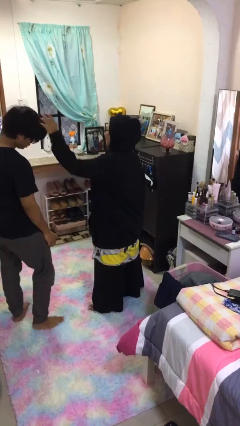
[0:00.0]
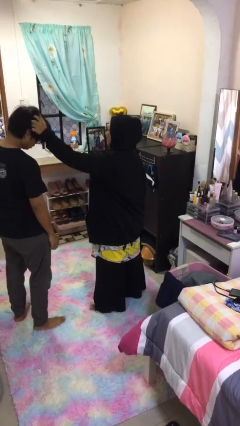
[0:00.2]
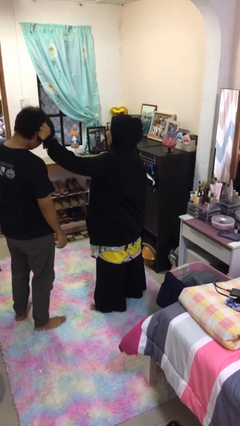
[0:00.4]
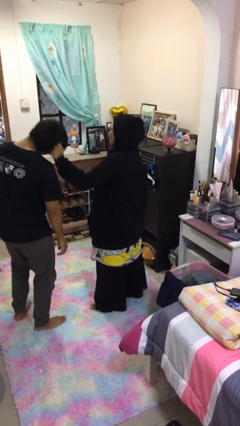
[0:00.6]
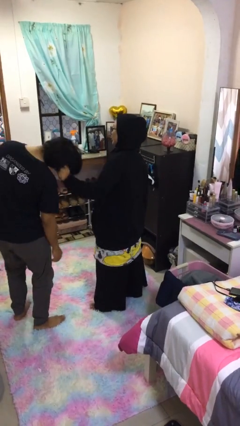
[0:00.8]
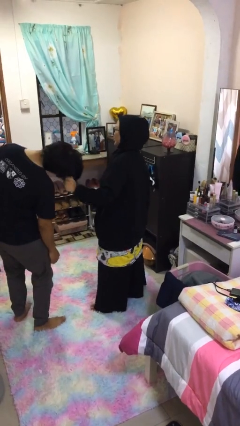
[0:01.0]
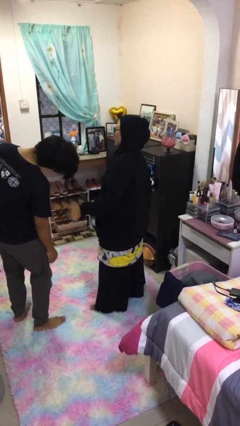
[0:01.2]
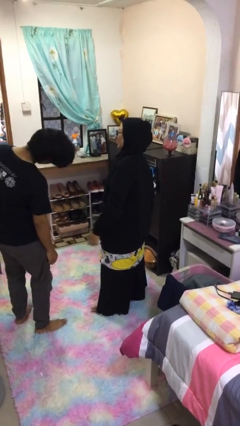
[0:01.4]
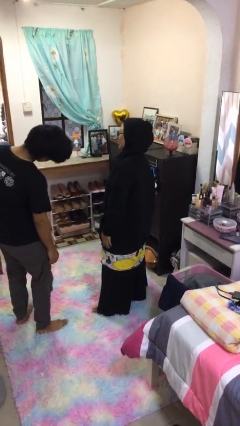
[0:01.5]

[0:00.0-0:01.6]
person grabs person by hair

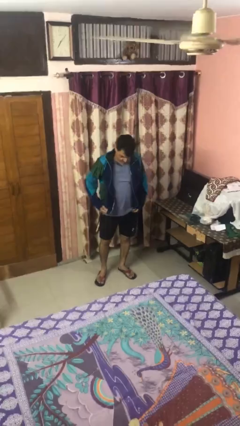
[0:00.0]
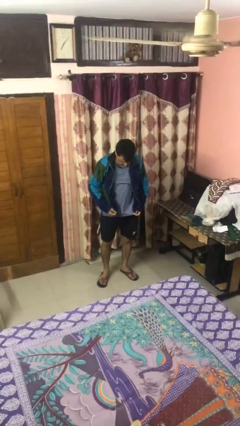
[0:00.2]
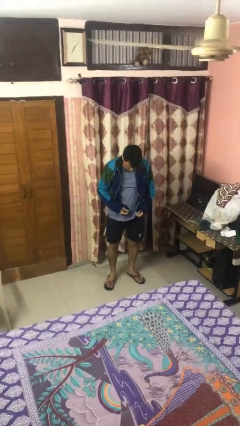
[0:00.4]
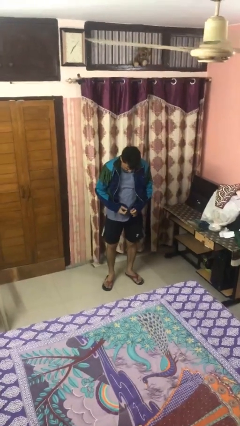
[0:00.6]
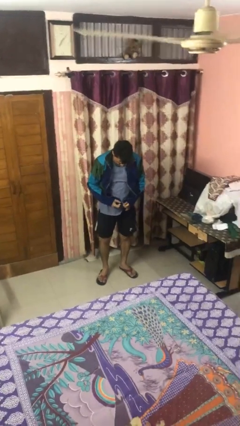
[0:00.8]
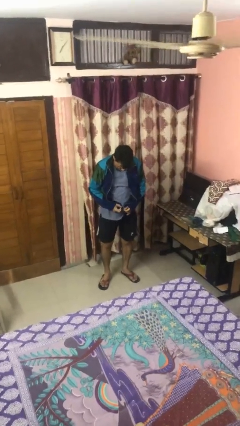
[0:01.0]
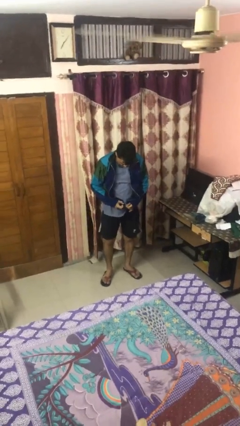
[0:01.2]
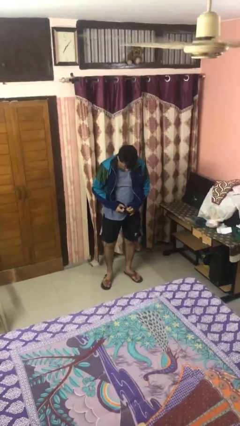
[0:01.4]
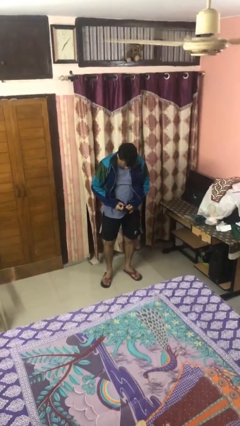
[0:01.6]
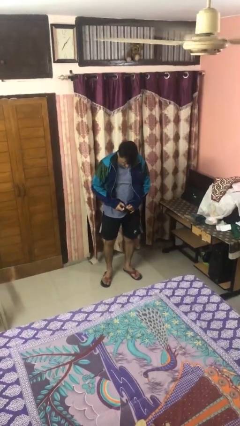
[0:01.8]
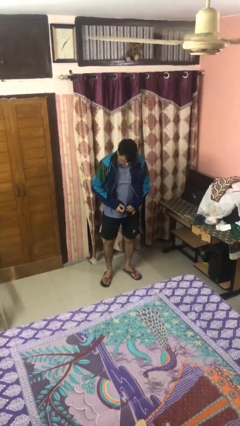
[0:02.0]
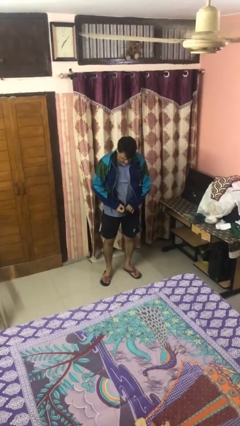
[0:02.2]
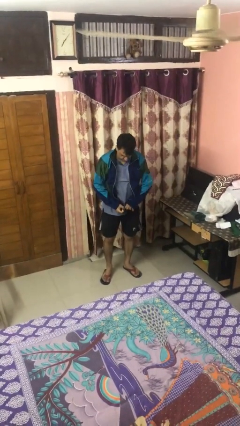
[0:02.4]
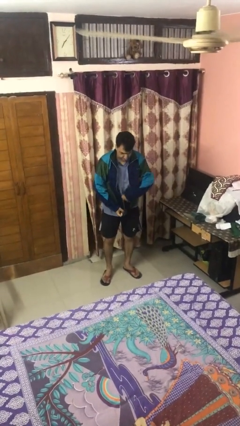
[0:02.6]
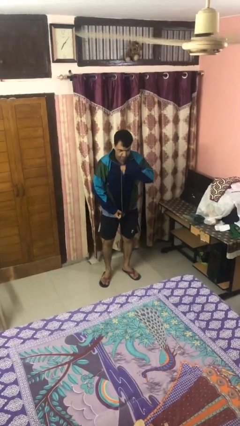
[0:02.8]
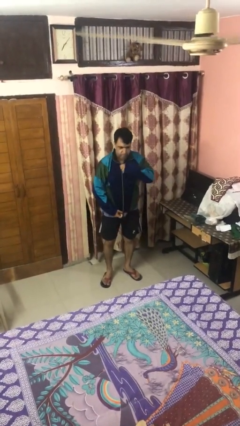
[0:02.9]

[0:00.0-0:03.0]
person zips up jacket

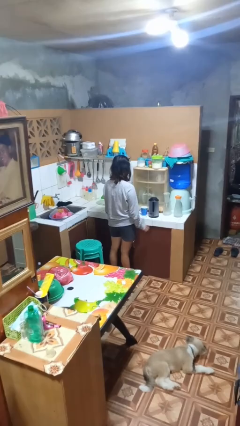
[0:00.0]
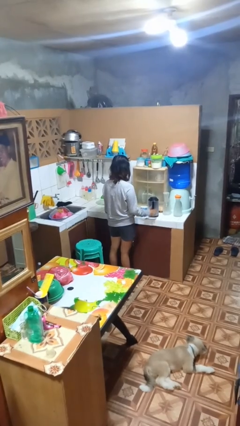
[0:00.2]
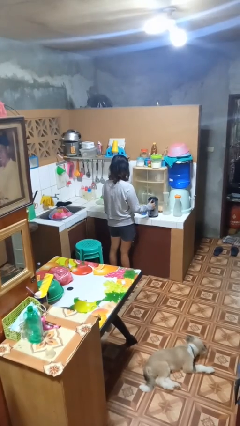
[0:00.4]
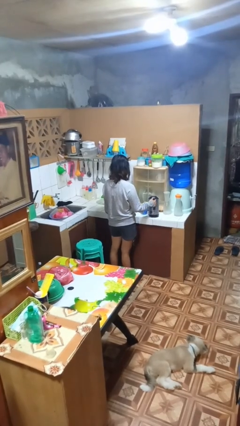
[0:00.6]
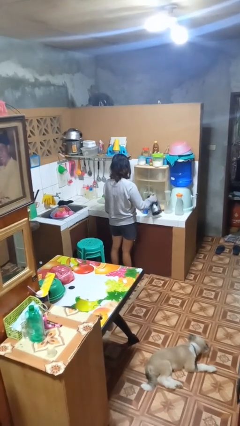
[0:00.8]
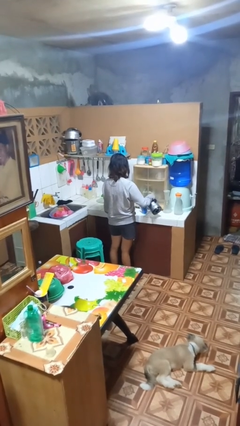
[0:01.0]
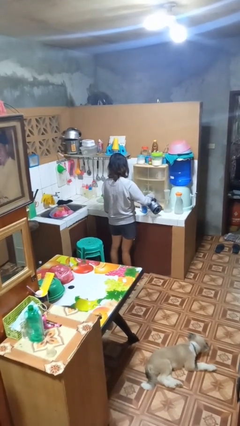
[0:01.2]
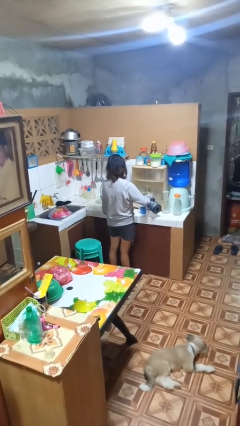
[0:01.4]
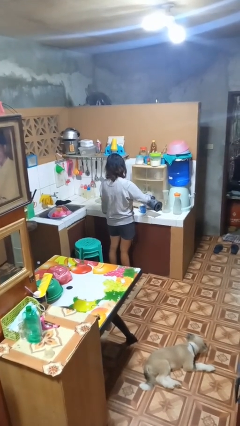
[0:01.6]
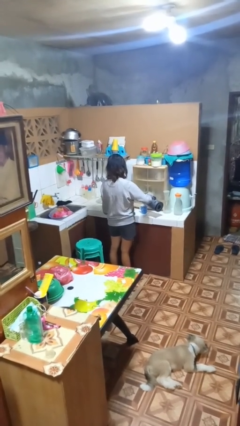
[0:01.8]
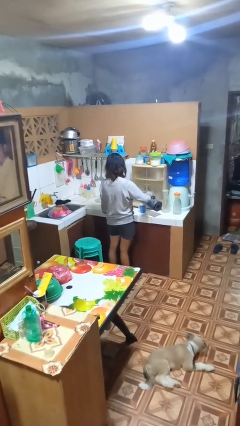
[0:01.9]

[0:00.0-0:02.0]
person pours coffee into mug

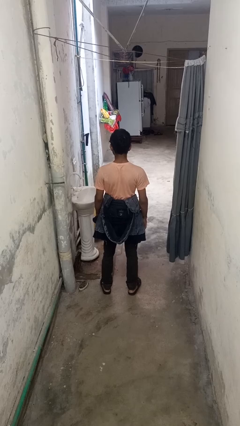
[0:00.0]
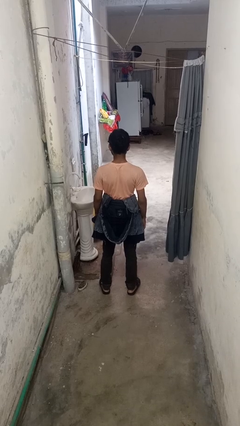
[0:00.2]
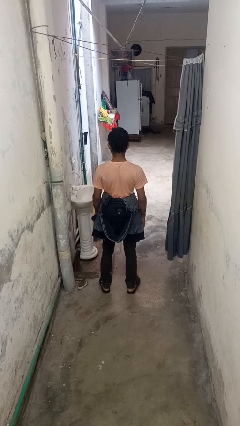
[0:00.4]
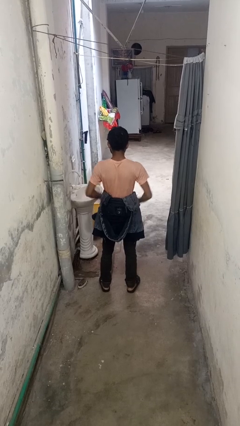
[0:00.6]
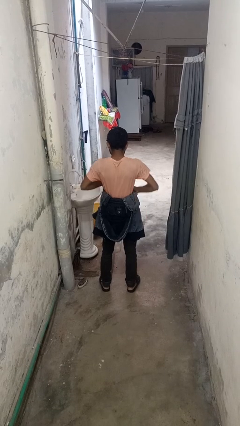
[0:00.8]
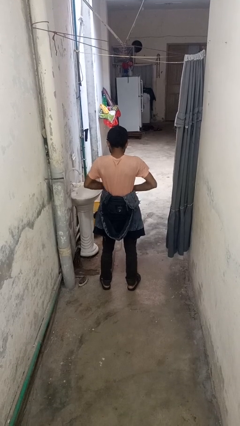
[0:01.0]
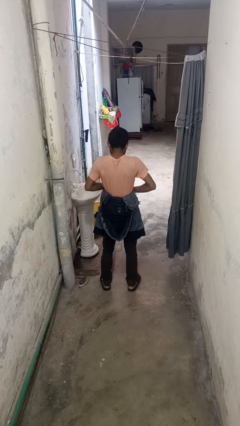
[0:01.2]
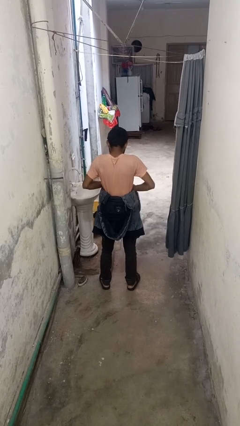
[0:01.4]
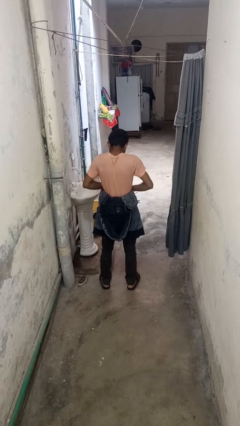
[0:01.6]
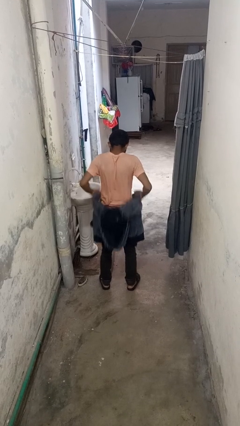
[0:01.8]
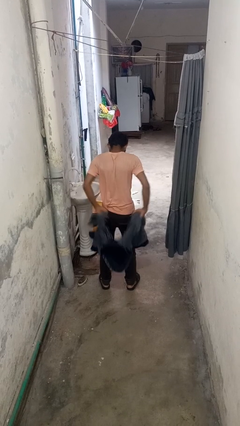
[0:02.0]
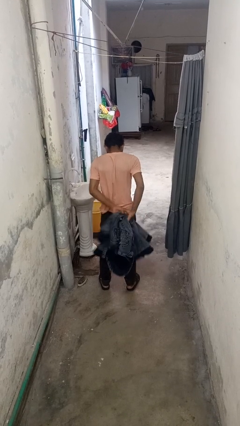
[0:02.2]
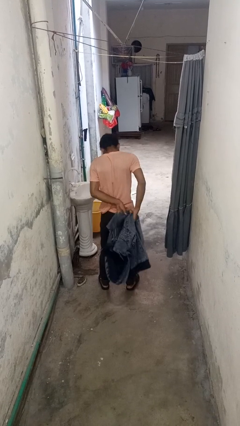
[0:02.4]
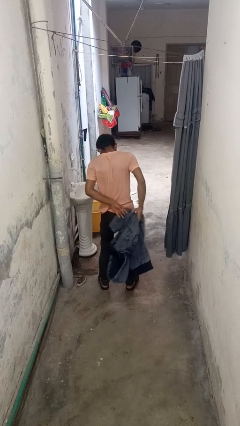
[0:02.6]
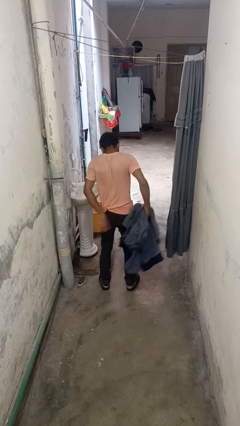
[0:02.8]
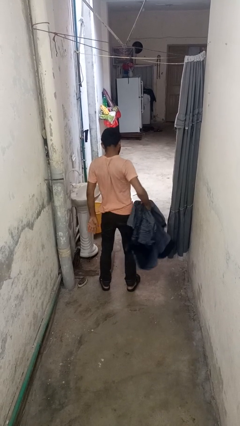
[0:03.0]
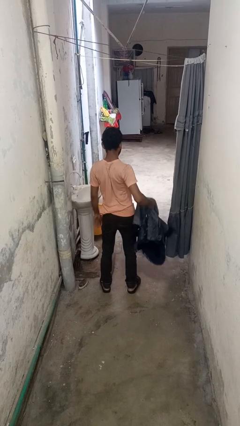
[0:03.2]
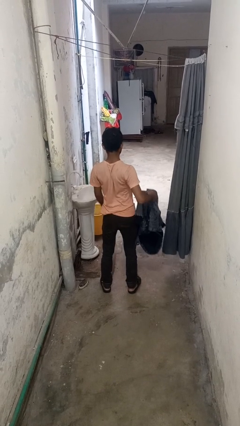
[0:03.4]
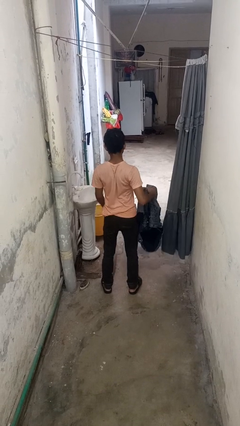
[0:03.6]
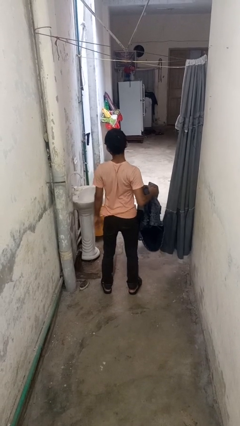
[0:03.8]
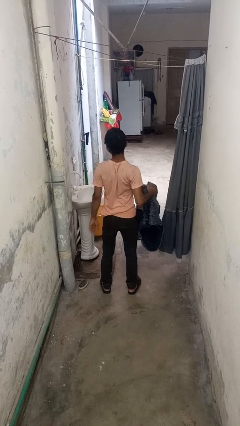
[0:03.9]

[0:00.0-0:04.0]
person unties jacket around waist

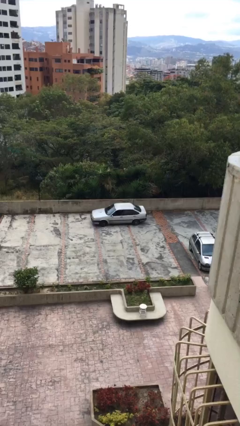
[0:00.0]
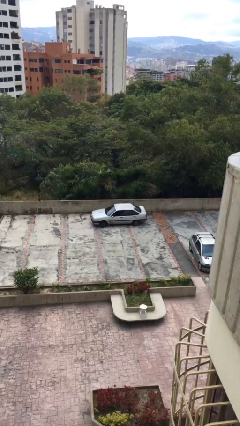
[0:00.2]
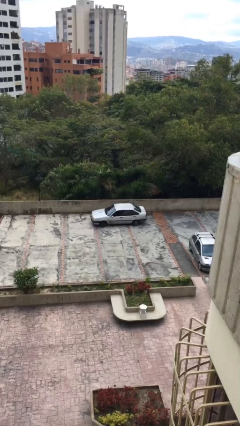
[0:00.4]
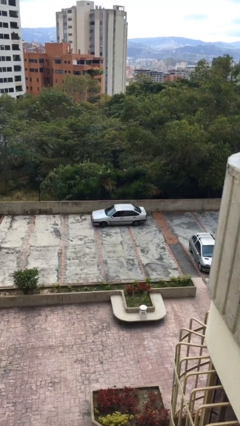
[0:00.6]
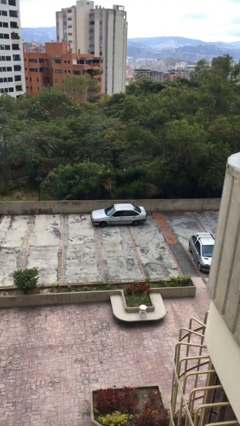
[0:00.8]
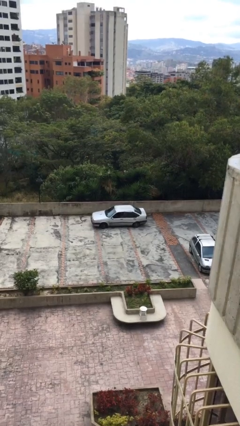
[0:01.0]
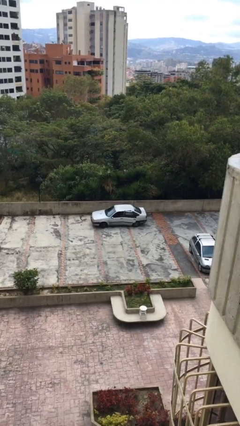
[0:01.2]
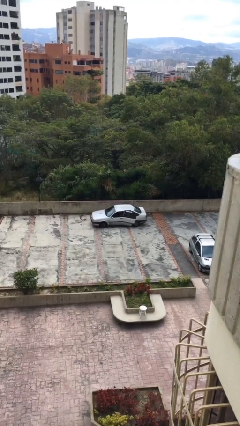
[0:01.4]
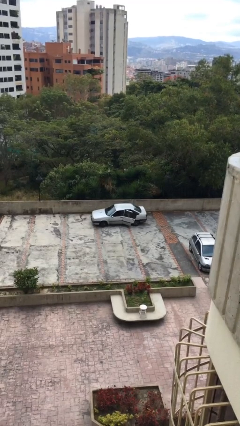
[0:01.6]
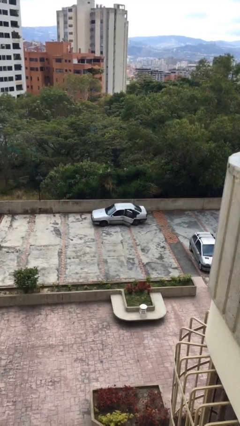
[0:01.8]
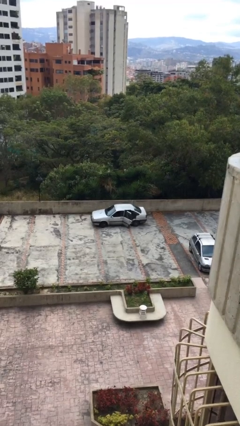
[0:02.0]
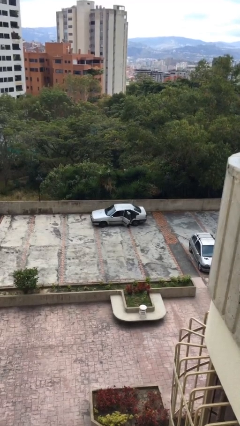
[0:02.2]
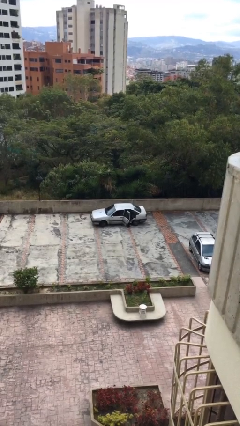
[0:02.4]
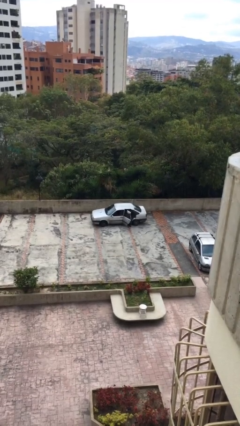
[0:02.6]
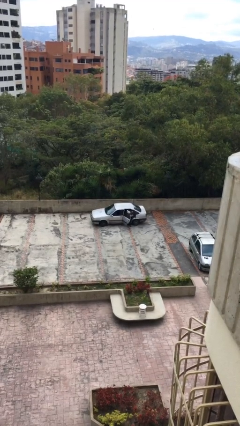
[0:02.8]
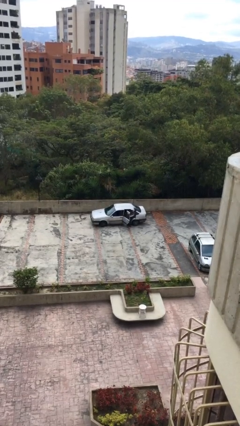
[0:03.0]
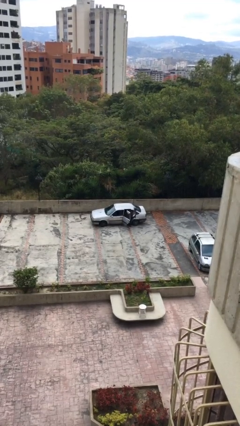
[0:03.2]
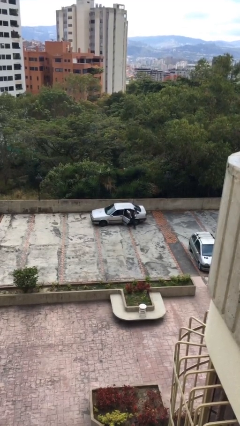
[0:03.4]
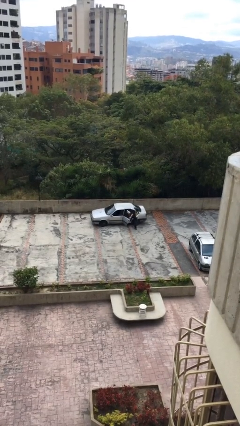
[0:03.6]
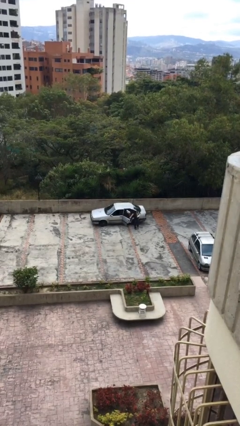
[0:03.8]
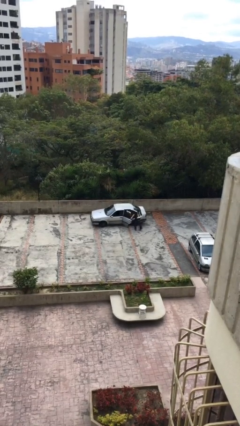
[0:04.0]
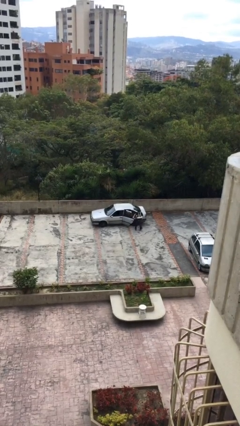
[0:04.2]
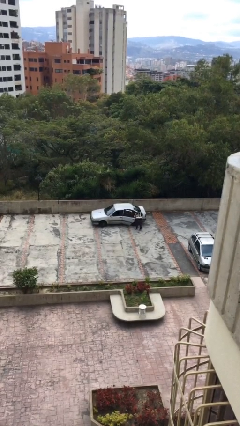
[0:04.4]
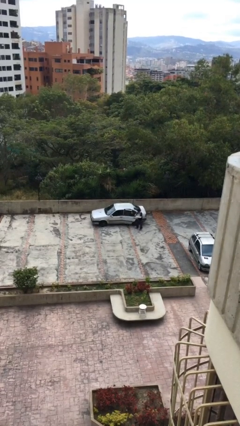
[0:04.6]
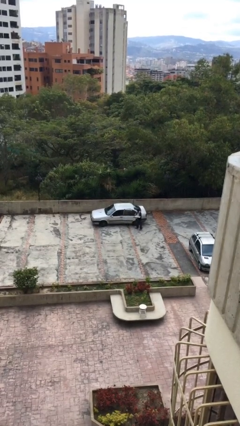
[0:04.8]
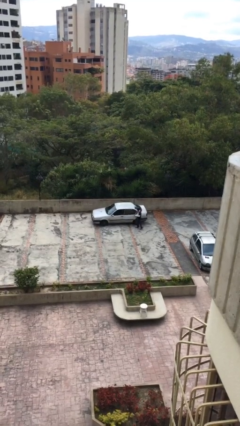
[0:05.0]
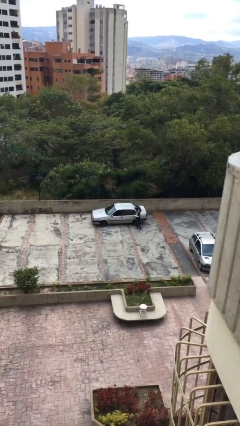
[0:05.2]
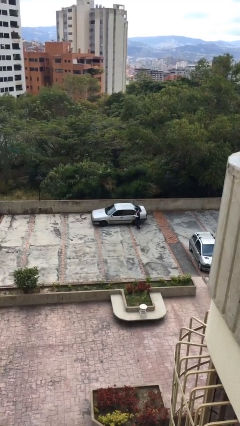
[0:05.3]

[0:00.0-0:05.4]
car drops off person

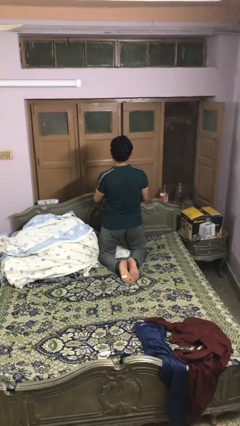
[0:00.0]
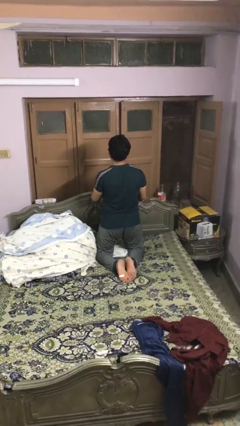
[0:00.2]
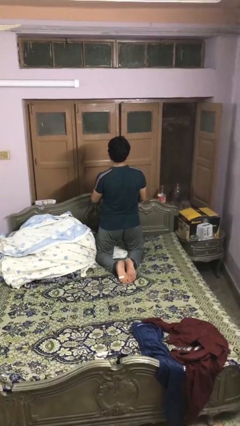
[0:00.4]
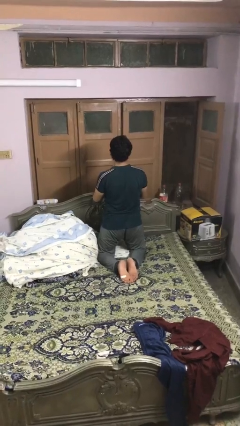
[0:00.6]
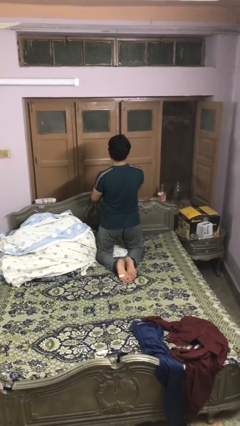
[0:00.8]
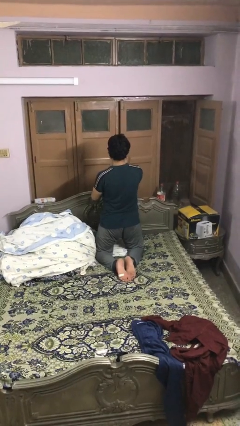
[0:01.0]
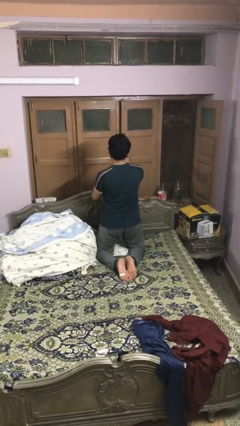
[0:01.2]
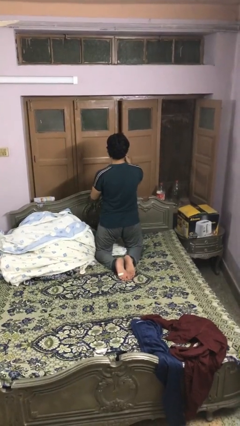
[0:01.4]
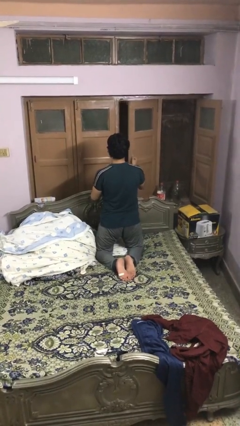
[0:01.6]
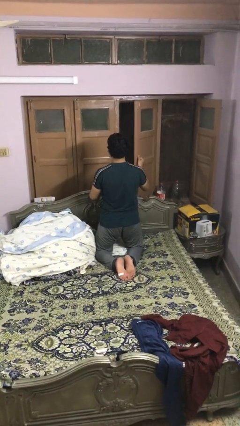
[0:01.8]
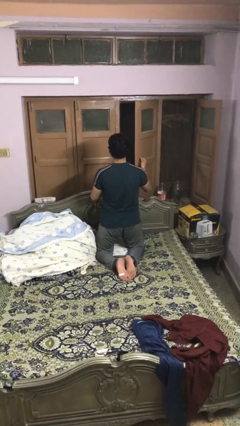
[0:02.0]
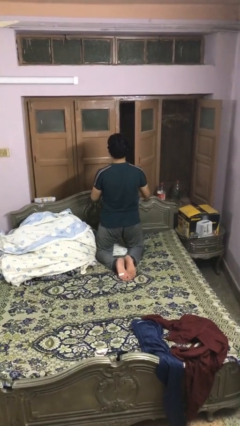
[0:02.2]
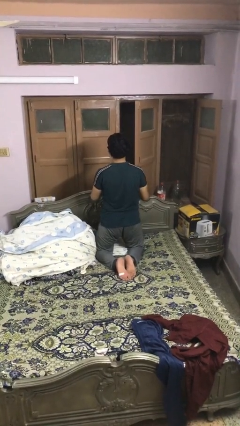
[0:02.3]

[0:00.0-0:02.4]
person opens home window
